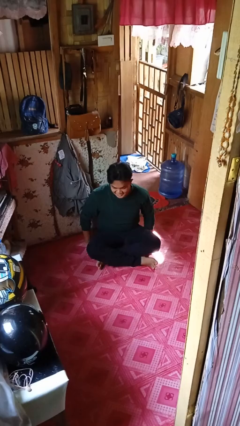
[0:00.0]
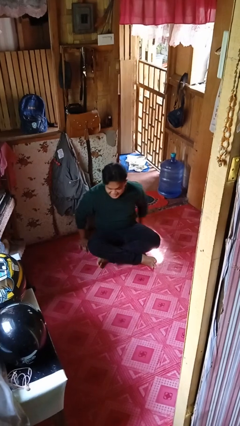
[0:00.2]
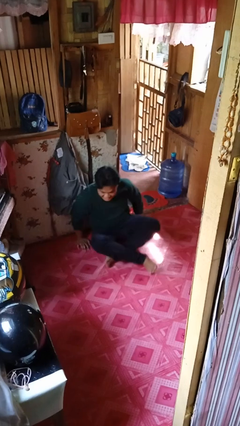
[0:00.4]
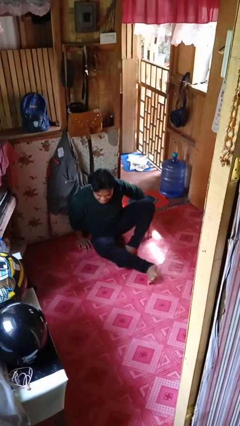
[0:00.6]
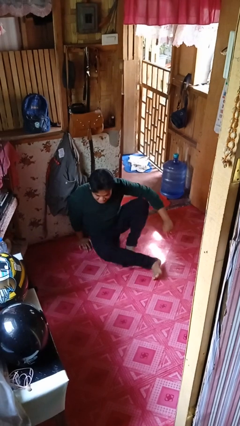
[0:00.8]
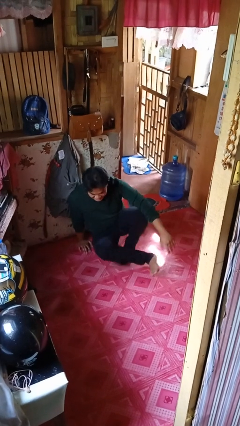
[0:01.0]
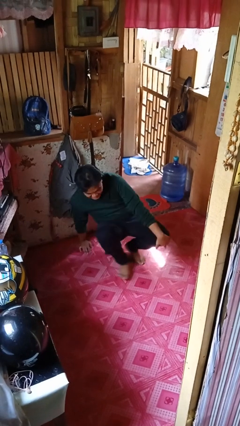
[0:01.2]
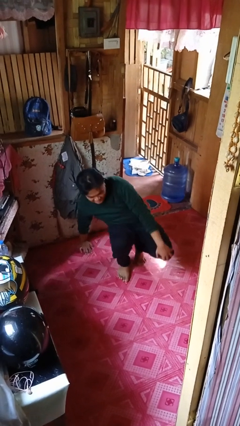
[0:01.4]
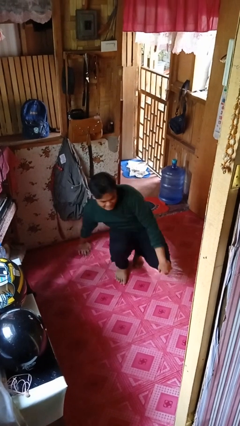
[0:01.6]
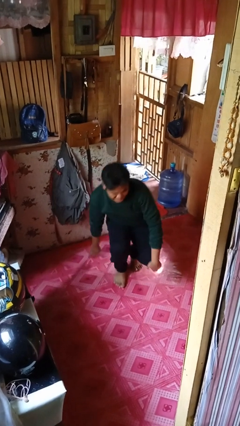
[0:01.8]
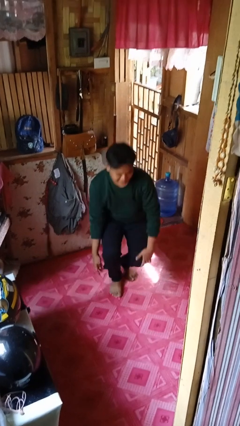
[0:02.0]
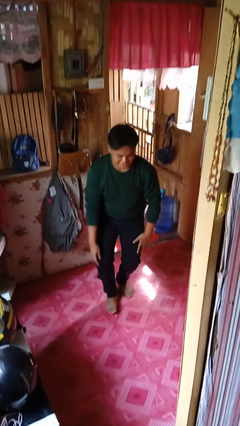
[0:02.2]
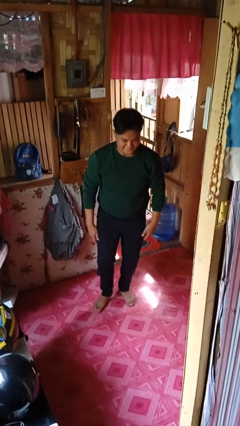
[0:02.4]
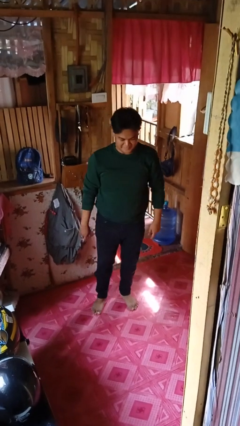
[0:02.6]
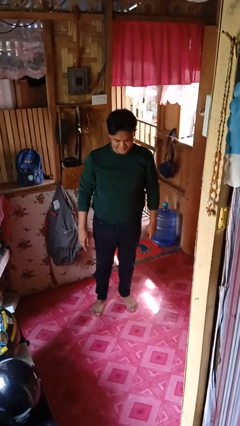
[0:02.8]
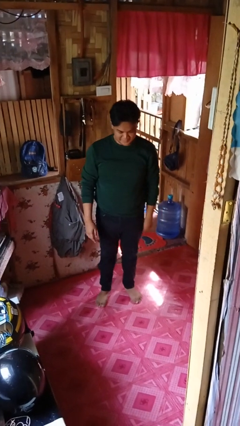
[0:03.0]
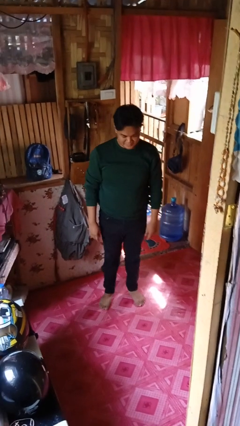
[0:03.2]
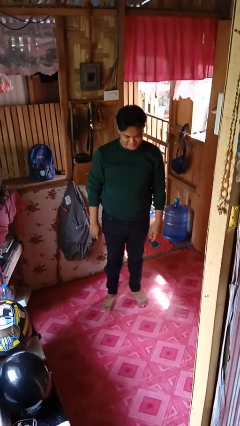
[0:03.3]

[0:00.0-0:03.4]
person stands up from floor

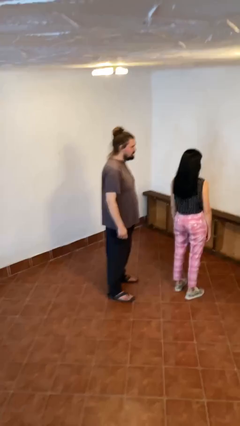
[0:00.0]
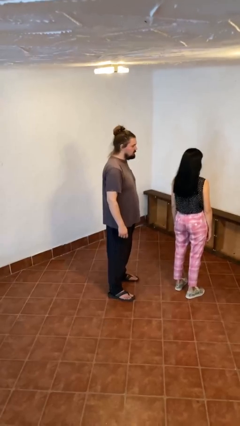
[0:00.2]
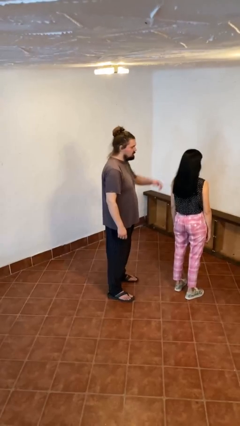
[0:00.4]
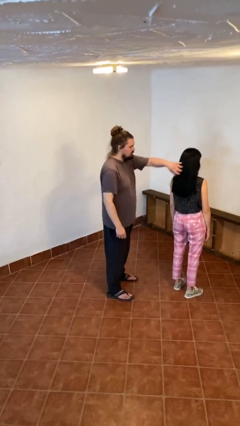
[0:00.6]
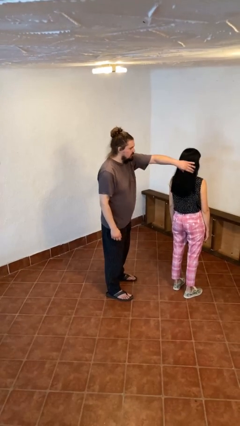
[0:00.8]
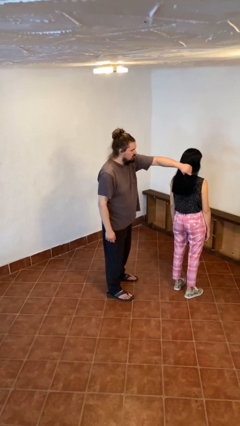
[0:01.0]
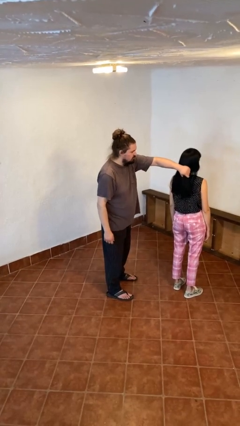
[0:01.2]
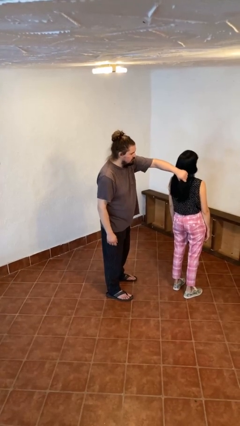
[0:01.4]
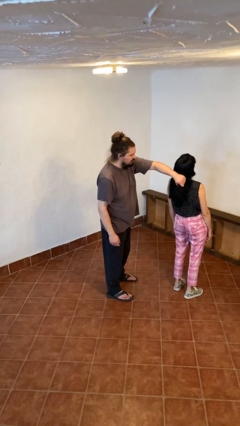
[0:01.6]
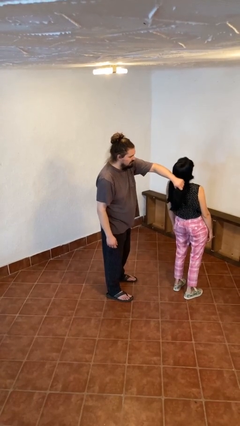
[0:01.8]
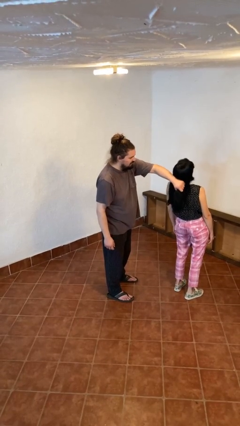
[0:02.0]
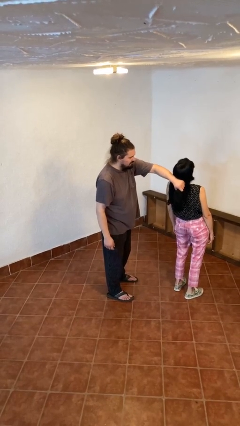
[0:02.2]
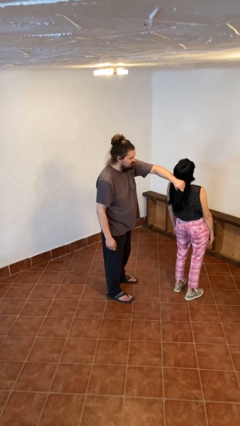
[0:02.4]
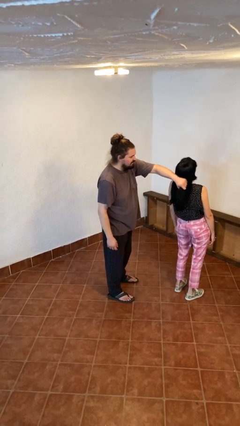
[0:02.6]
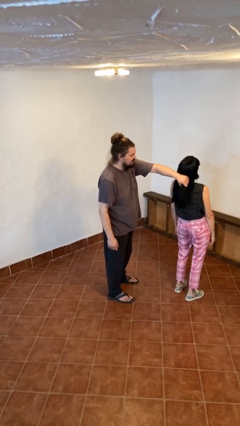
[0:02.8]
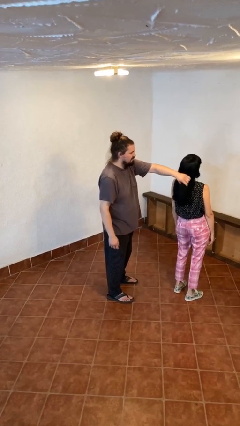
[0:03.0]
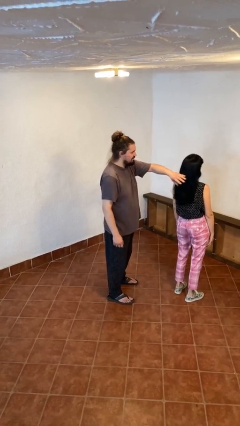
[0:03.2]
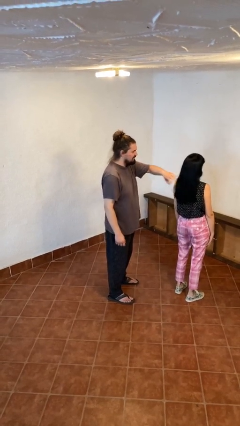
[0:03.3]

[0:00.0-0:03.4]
person grabs person by hair

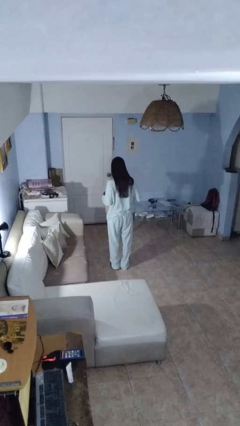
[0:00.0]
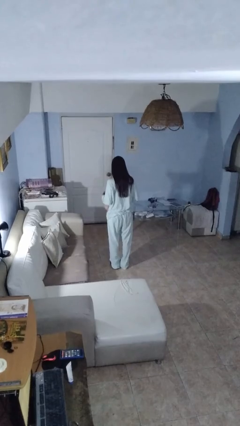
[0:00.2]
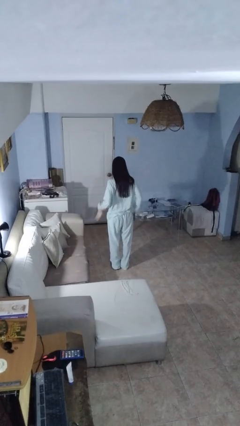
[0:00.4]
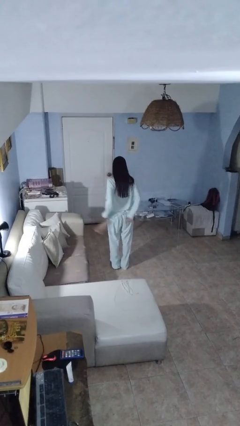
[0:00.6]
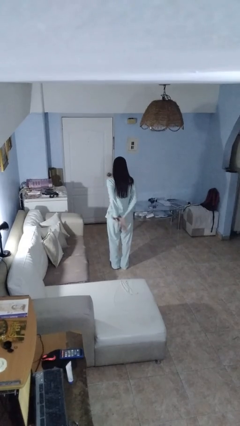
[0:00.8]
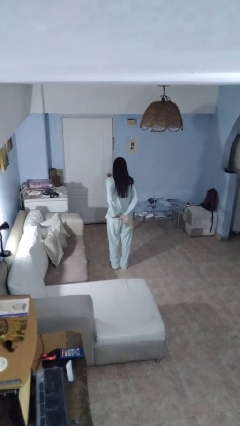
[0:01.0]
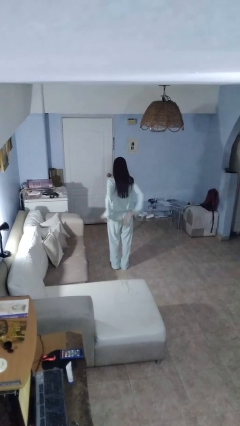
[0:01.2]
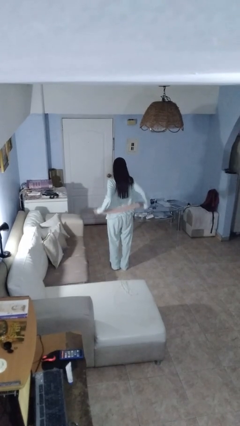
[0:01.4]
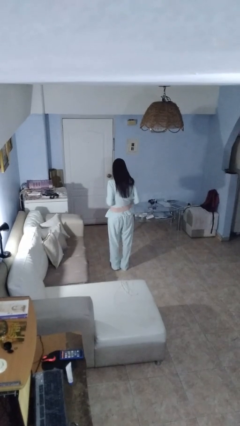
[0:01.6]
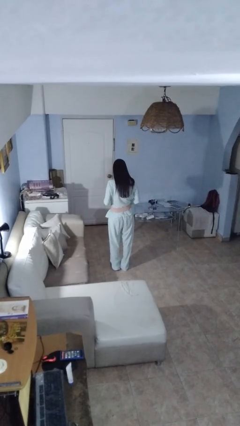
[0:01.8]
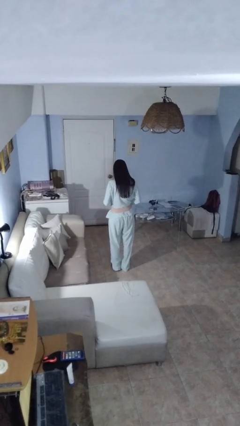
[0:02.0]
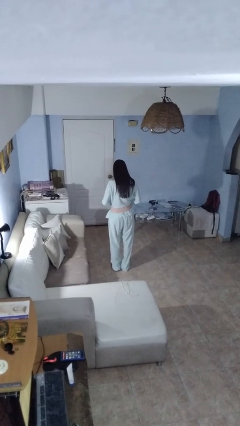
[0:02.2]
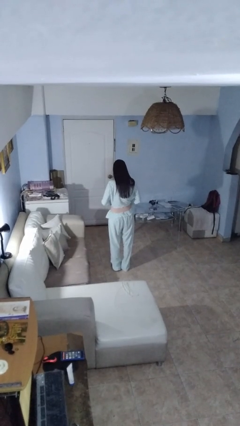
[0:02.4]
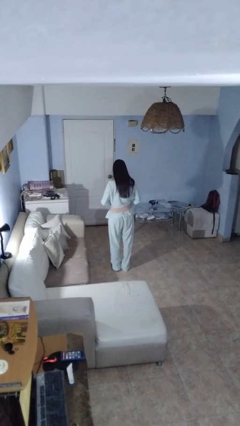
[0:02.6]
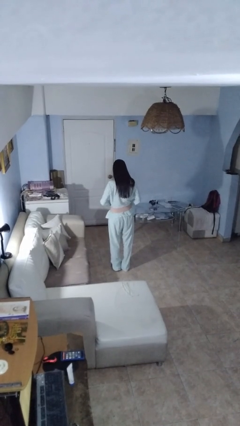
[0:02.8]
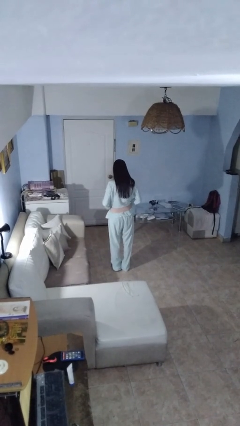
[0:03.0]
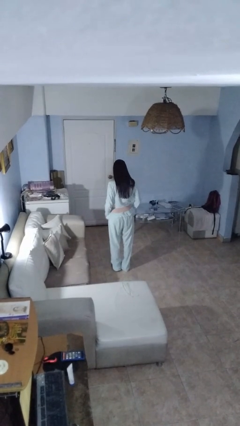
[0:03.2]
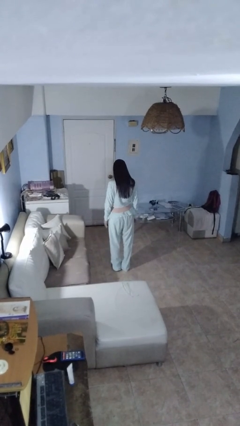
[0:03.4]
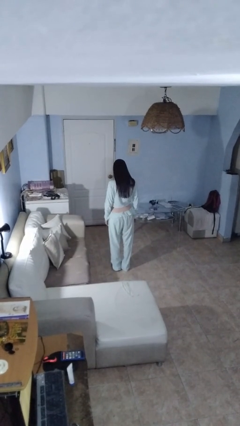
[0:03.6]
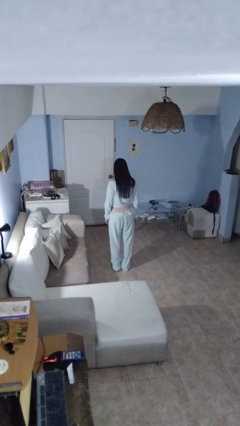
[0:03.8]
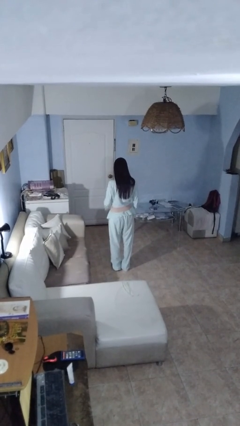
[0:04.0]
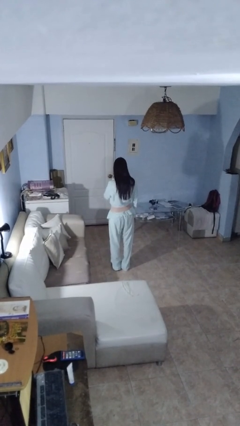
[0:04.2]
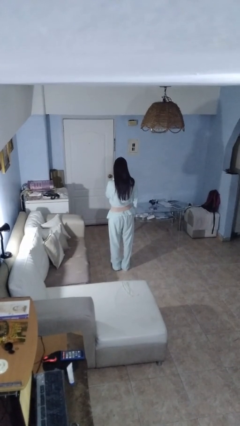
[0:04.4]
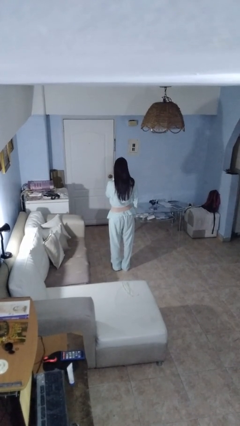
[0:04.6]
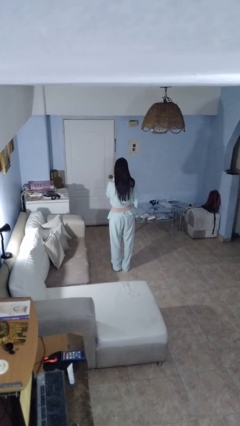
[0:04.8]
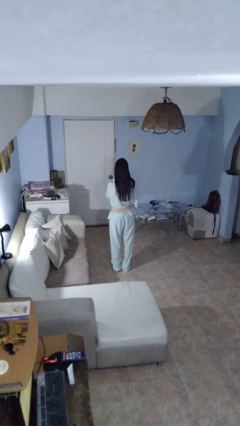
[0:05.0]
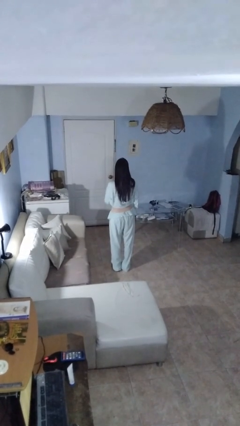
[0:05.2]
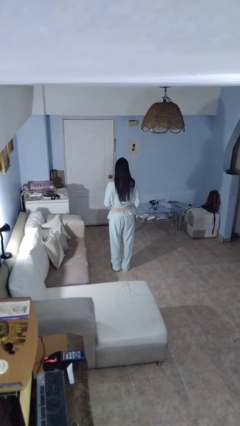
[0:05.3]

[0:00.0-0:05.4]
person puts on belt

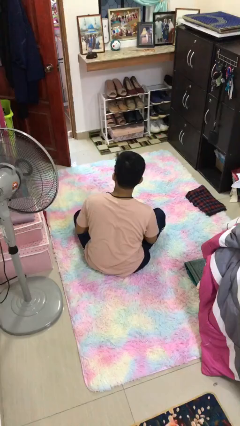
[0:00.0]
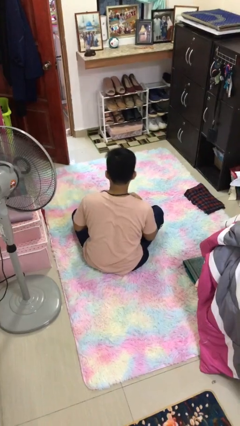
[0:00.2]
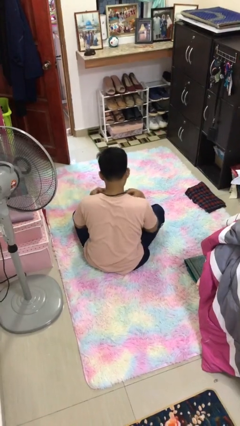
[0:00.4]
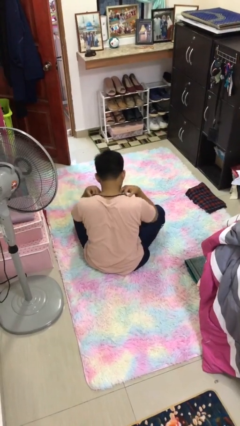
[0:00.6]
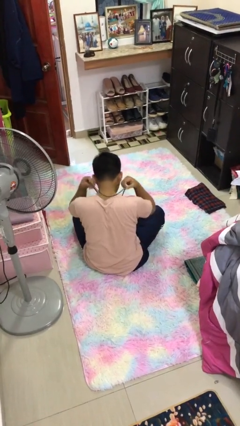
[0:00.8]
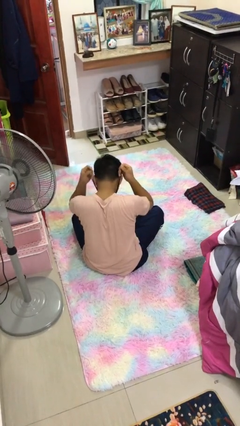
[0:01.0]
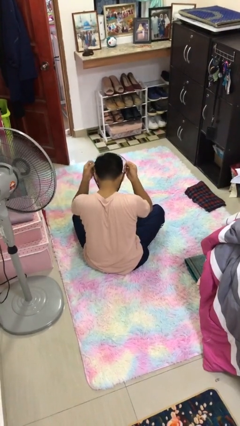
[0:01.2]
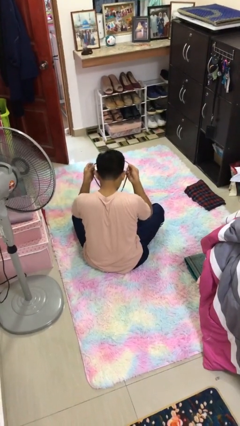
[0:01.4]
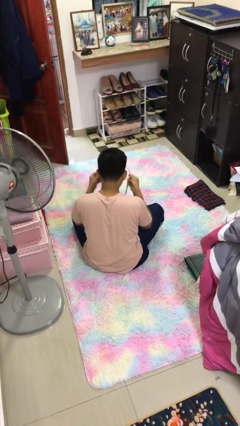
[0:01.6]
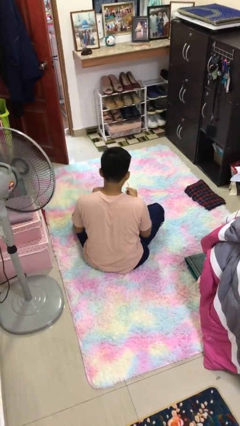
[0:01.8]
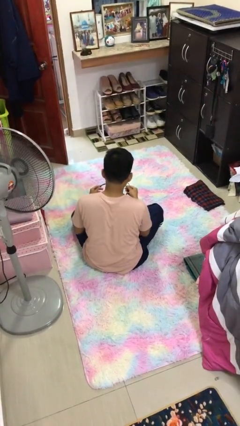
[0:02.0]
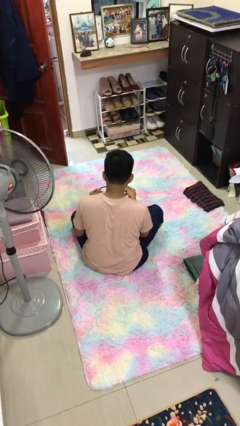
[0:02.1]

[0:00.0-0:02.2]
person takes off necklace

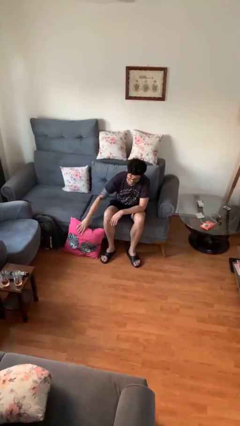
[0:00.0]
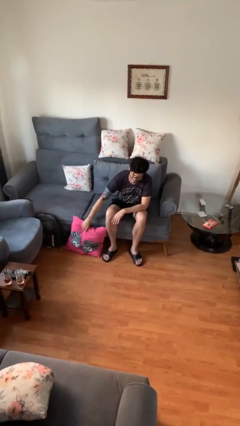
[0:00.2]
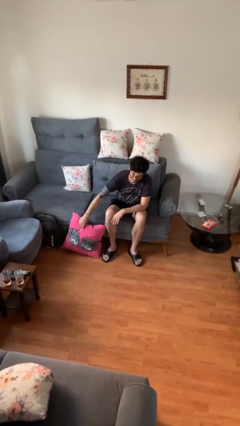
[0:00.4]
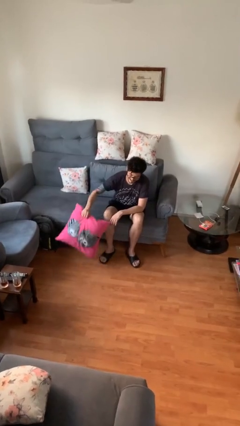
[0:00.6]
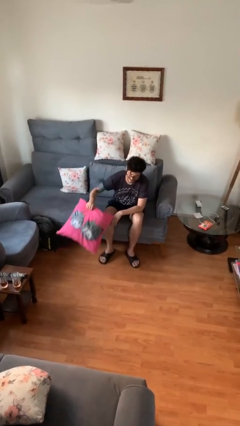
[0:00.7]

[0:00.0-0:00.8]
person picks up object from floor

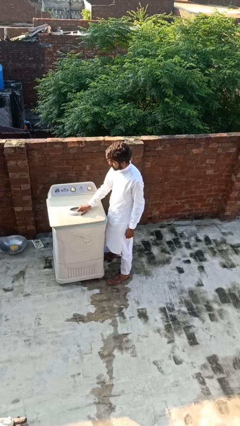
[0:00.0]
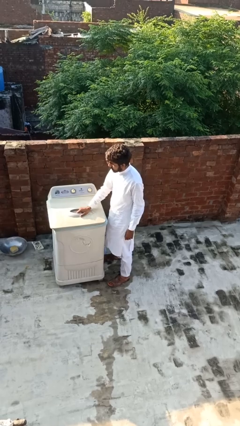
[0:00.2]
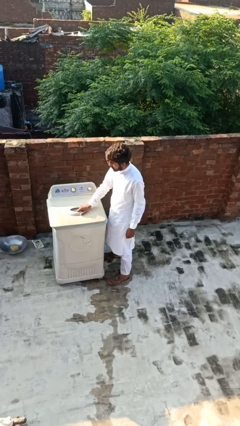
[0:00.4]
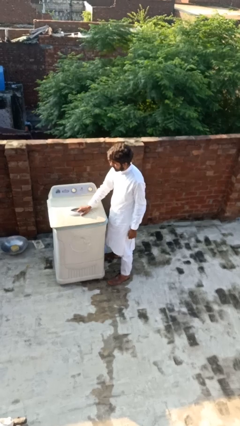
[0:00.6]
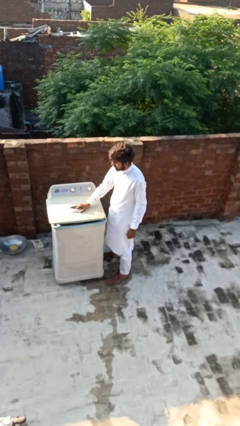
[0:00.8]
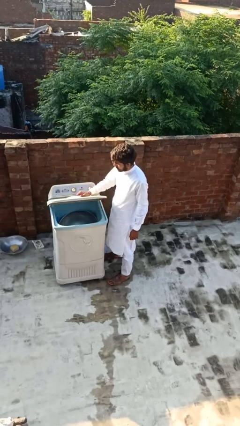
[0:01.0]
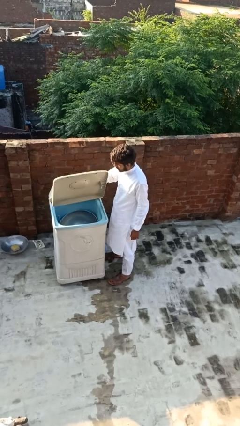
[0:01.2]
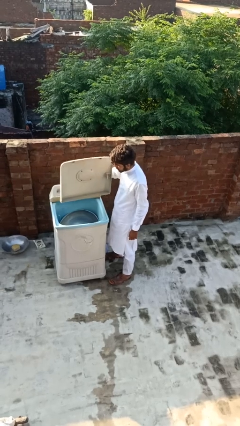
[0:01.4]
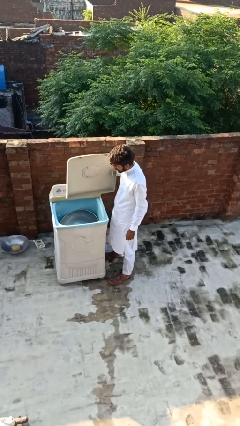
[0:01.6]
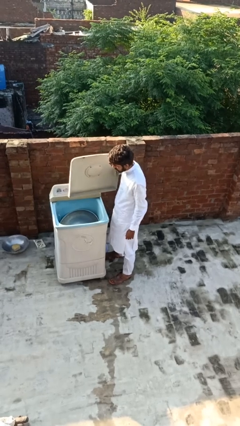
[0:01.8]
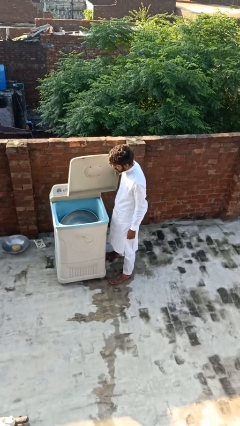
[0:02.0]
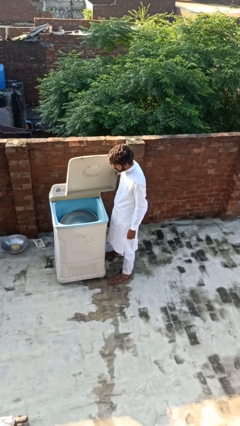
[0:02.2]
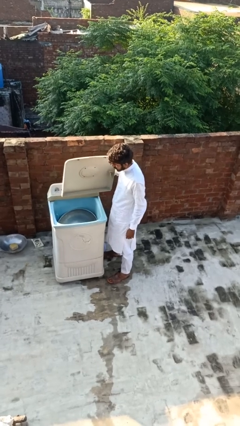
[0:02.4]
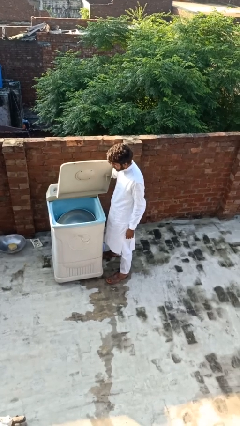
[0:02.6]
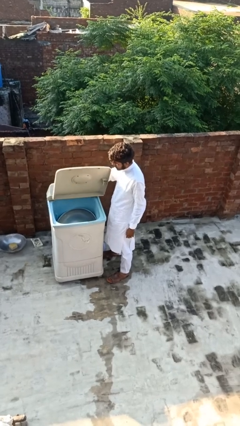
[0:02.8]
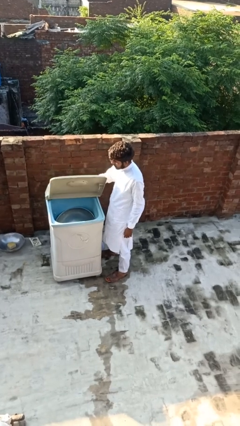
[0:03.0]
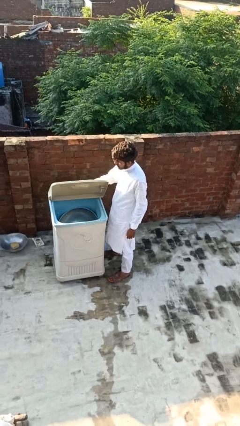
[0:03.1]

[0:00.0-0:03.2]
person opens clothes washer
